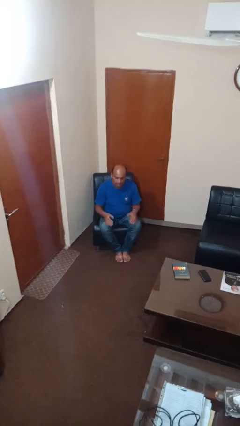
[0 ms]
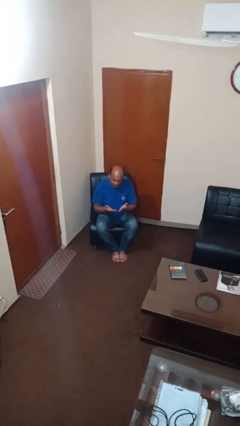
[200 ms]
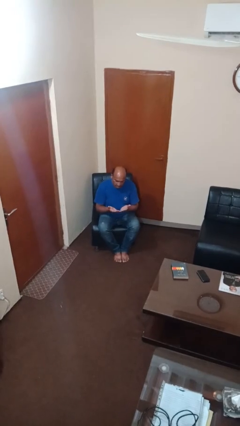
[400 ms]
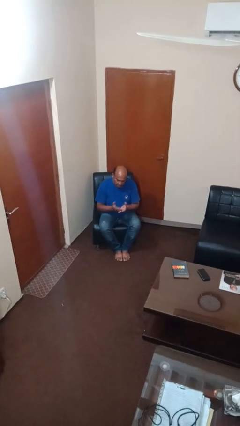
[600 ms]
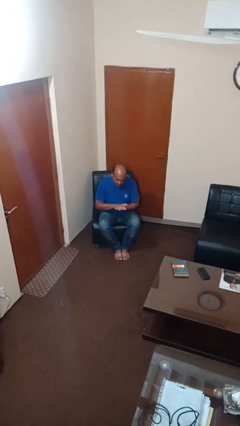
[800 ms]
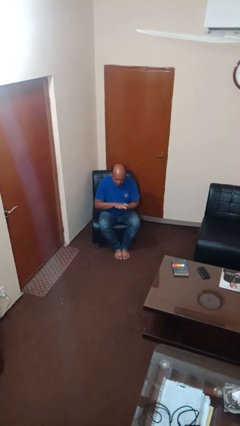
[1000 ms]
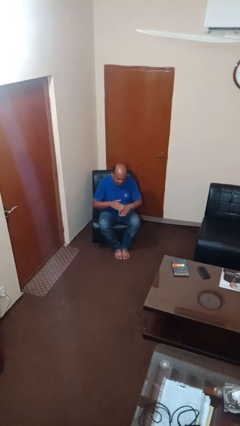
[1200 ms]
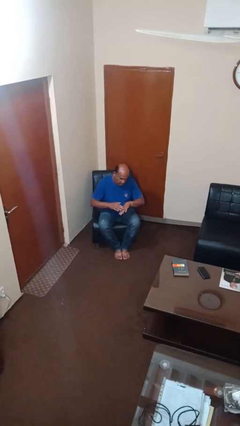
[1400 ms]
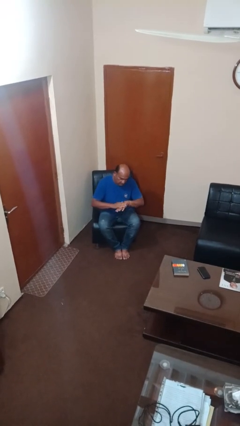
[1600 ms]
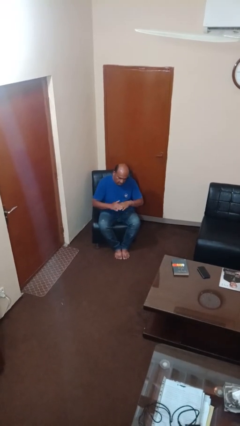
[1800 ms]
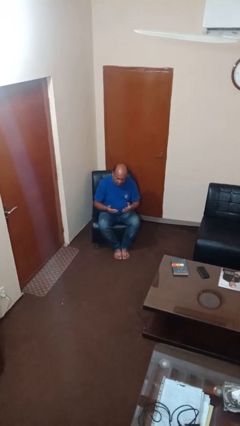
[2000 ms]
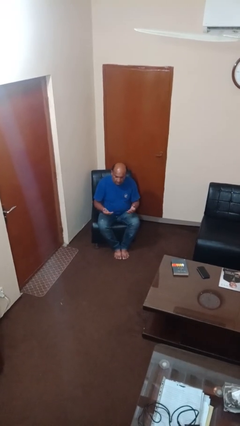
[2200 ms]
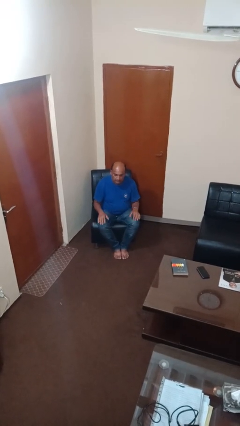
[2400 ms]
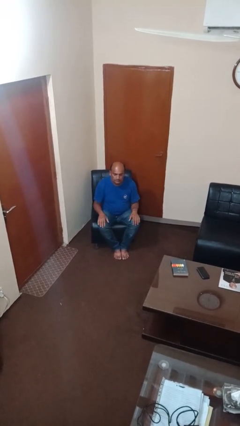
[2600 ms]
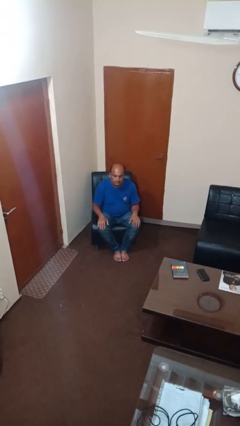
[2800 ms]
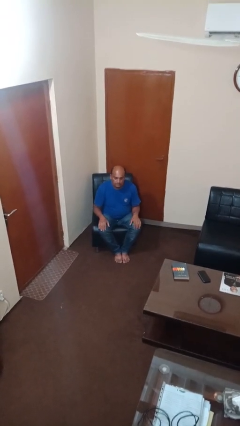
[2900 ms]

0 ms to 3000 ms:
person looks at hands in lap

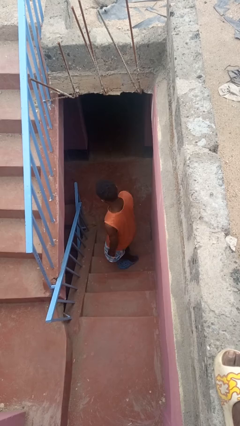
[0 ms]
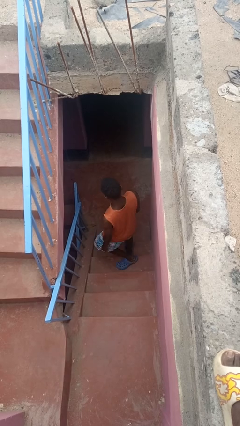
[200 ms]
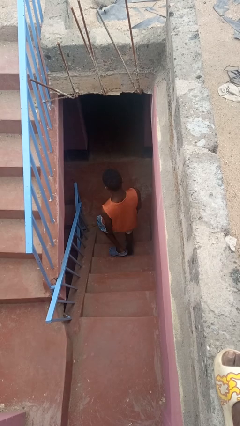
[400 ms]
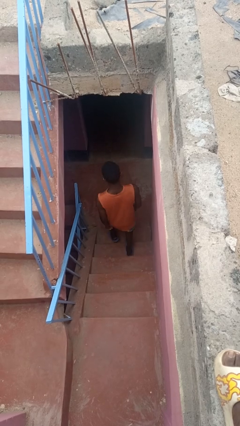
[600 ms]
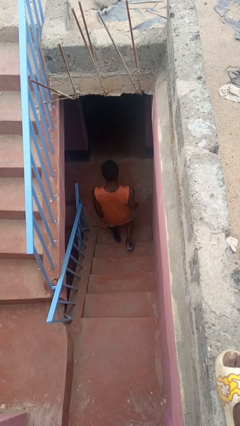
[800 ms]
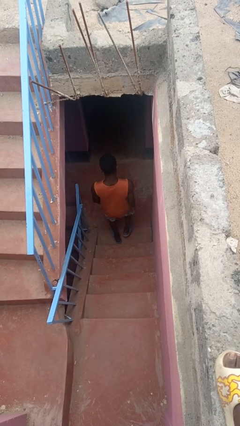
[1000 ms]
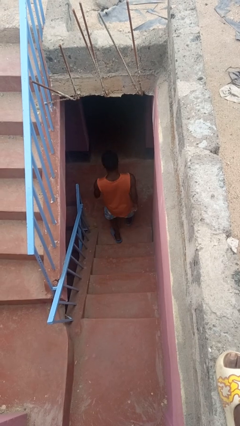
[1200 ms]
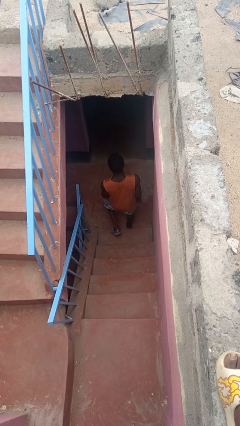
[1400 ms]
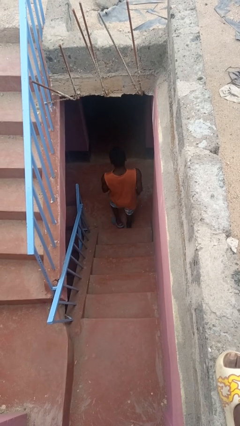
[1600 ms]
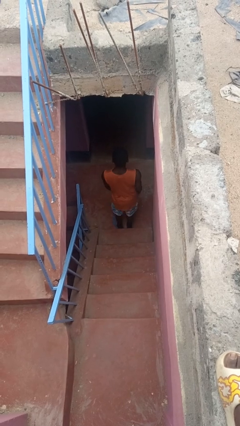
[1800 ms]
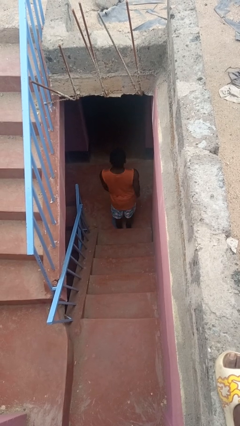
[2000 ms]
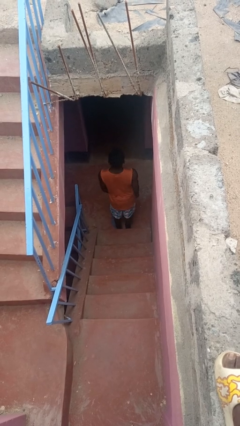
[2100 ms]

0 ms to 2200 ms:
person climbs down stairs

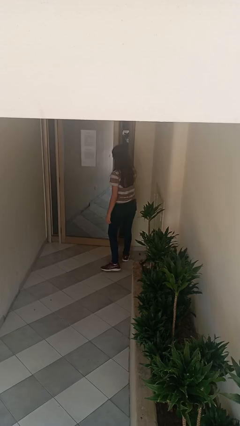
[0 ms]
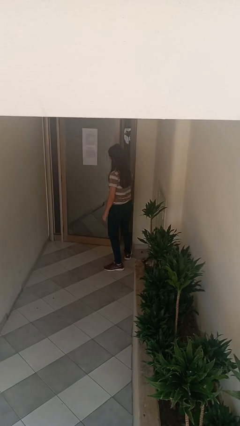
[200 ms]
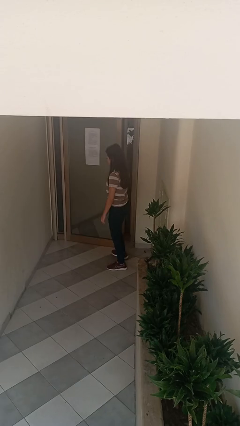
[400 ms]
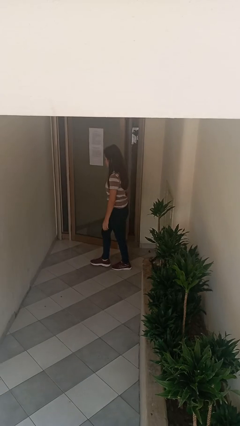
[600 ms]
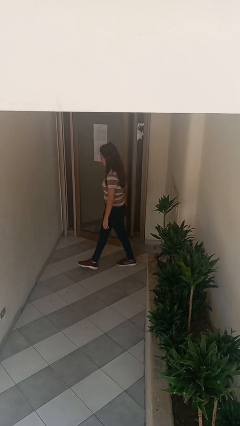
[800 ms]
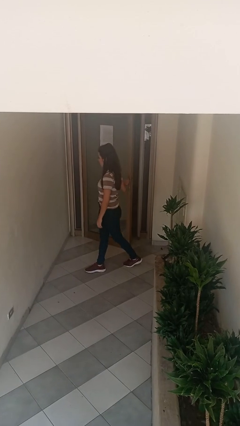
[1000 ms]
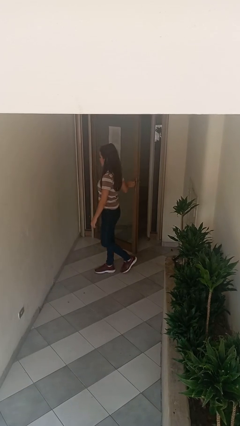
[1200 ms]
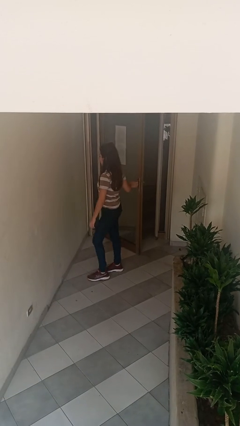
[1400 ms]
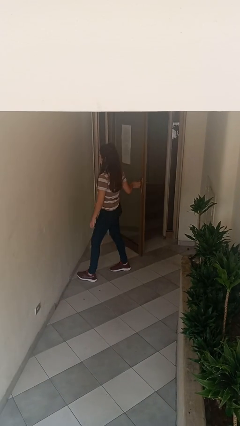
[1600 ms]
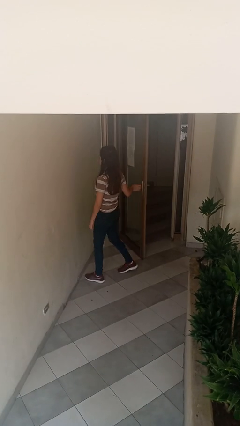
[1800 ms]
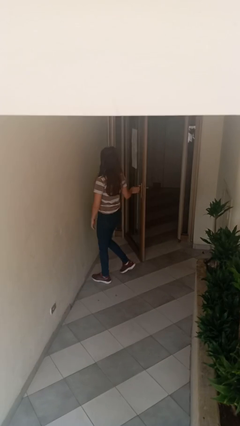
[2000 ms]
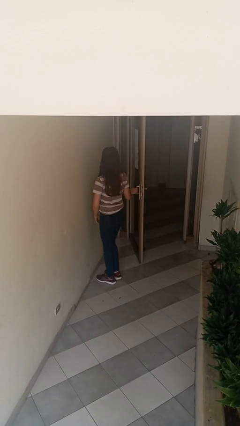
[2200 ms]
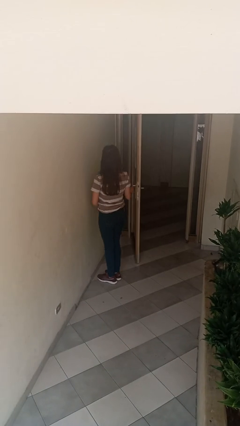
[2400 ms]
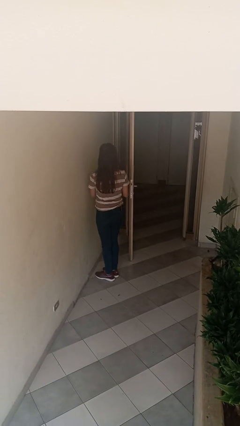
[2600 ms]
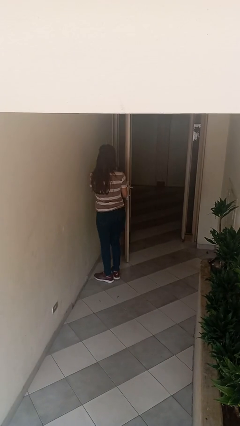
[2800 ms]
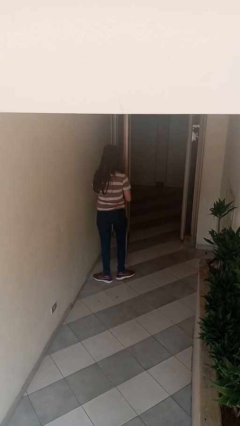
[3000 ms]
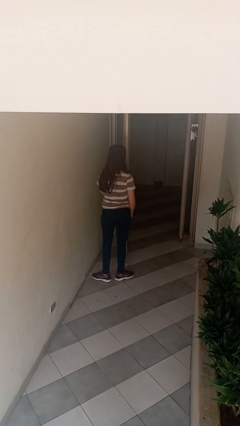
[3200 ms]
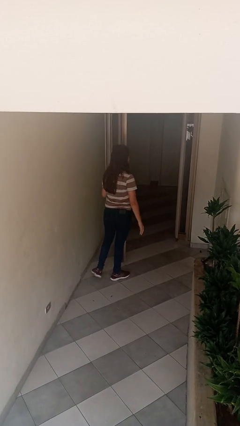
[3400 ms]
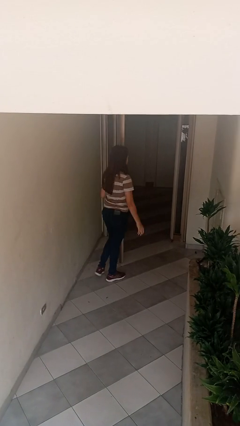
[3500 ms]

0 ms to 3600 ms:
person opens facility door

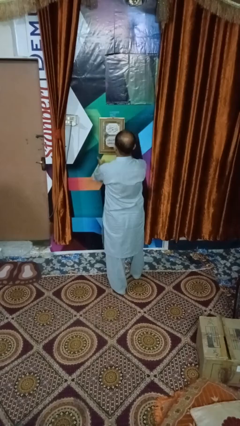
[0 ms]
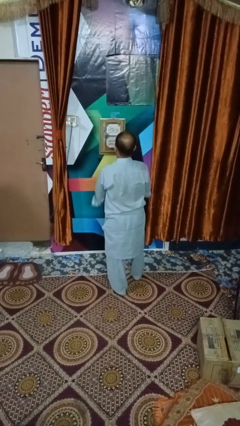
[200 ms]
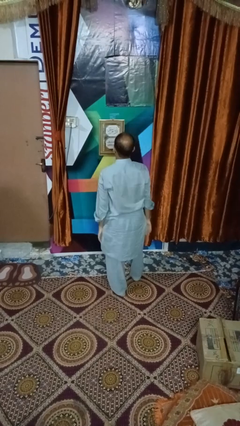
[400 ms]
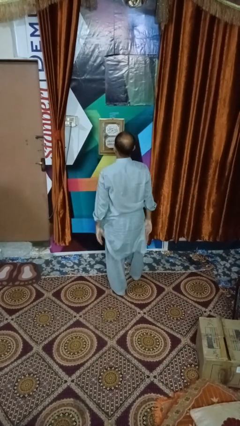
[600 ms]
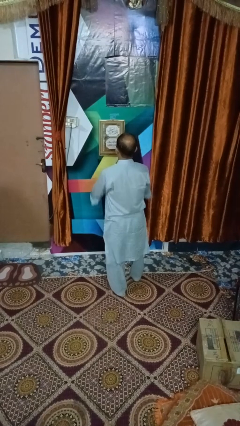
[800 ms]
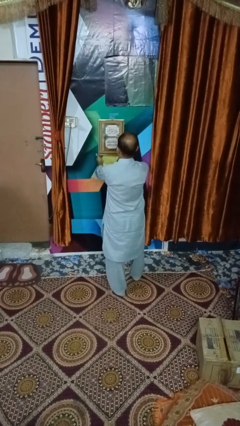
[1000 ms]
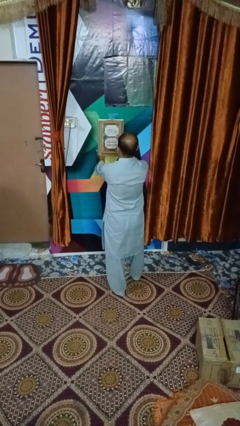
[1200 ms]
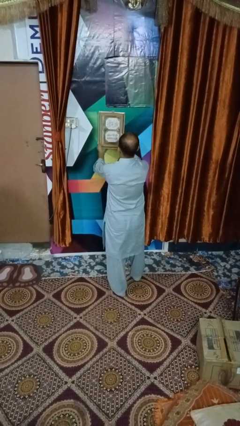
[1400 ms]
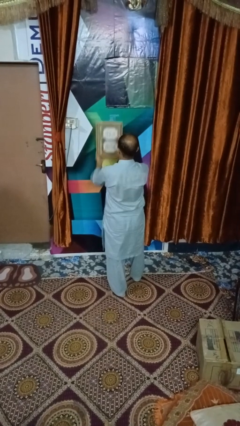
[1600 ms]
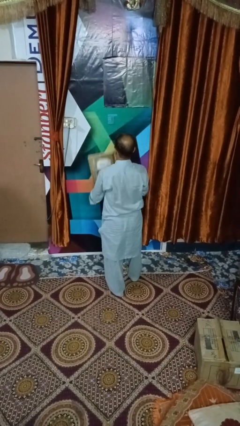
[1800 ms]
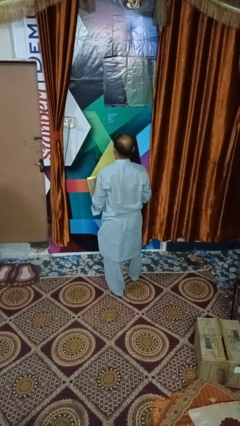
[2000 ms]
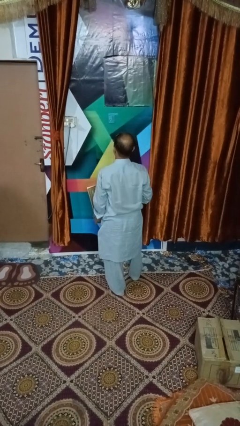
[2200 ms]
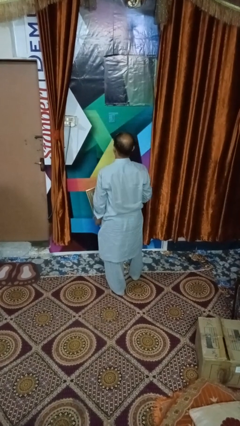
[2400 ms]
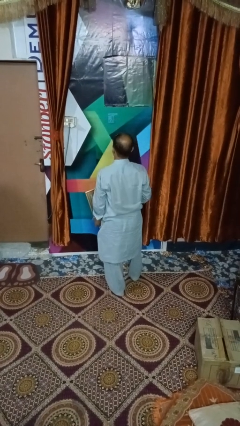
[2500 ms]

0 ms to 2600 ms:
person takes down picture frame

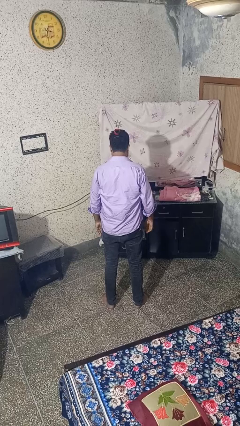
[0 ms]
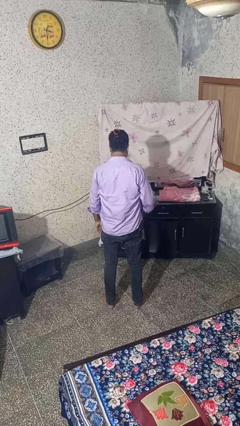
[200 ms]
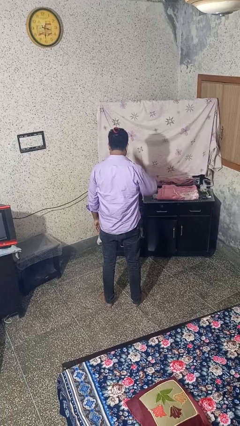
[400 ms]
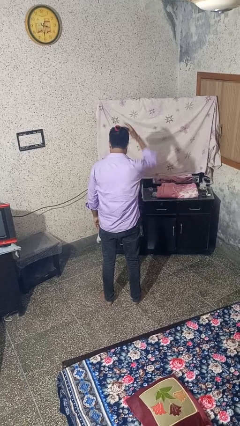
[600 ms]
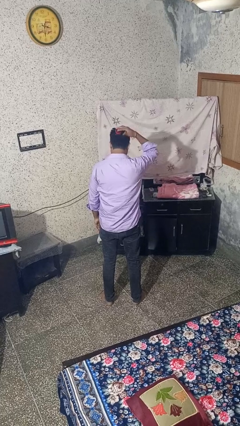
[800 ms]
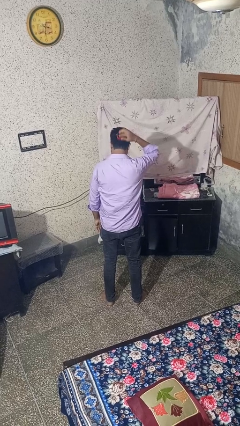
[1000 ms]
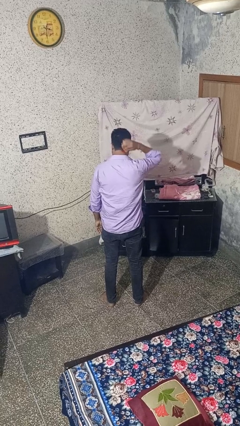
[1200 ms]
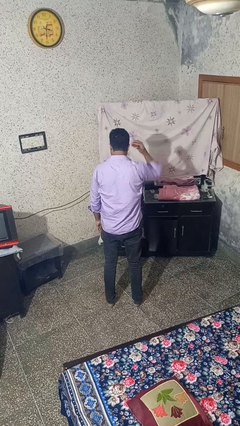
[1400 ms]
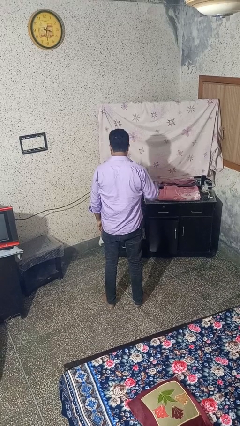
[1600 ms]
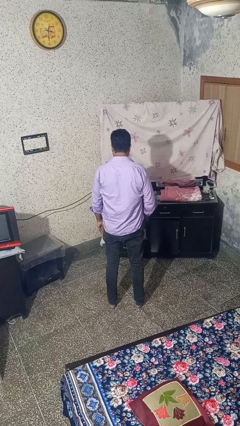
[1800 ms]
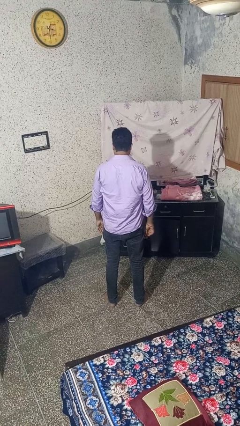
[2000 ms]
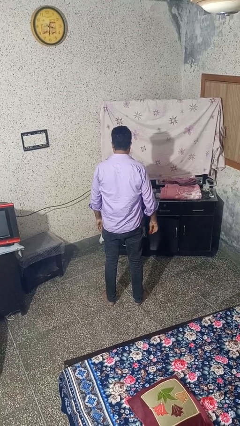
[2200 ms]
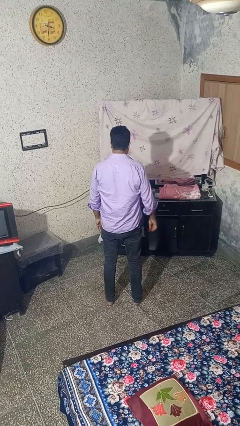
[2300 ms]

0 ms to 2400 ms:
person takes off hairtie

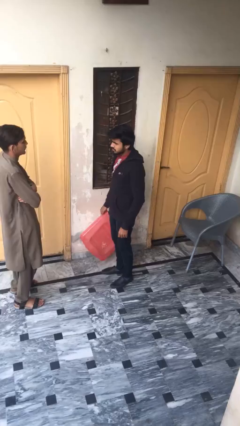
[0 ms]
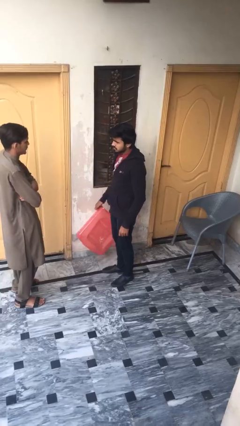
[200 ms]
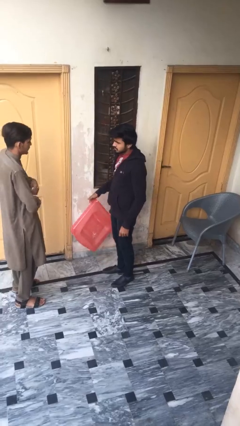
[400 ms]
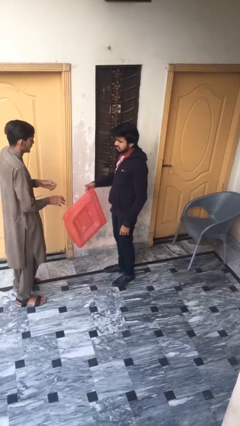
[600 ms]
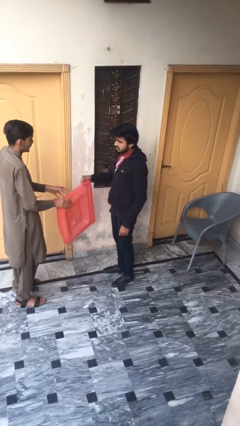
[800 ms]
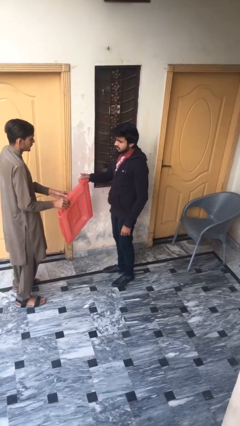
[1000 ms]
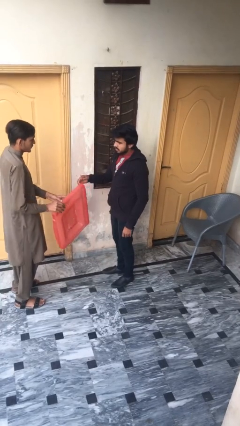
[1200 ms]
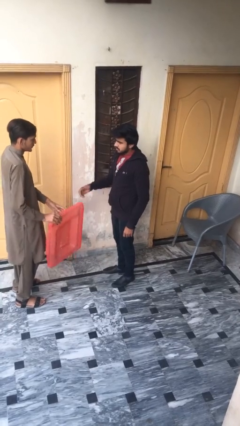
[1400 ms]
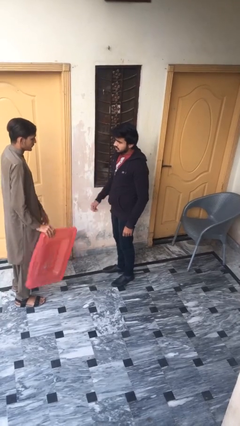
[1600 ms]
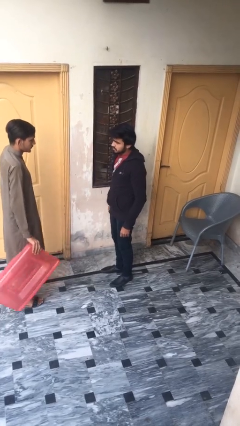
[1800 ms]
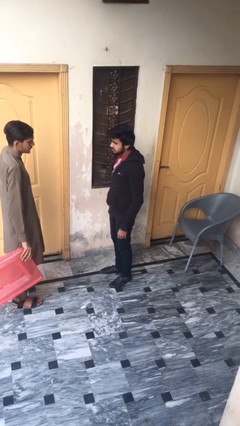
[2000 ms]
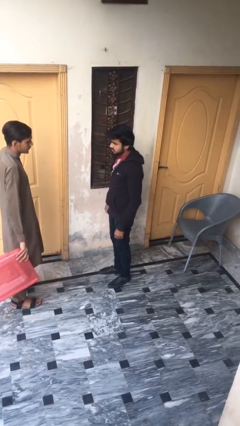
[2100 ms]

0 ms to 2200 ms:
person transfers object to person

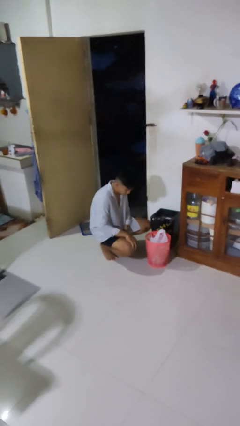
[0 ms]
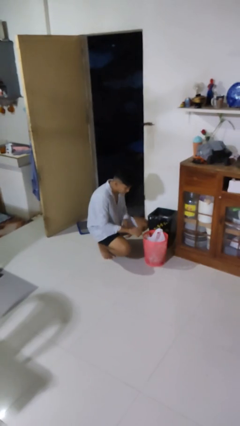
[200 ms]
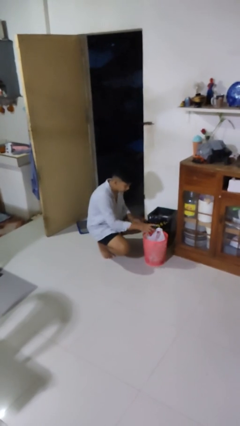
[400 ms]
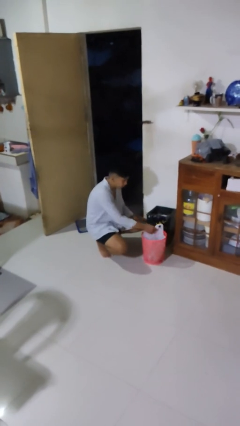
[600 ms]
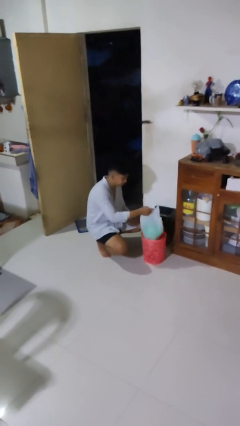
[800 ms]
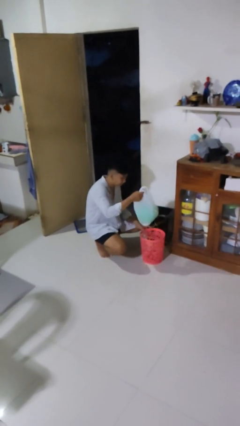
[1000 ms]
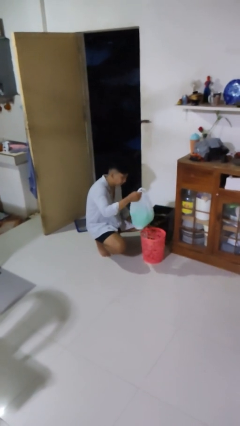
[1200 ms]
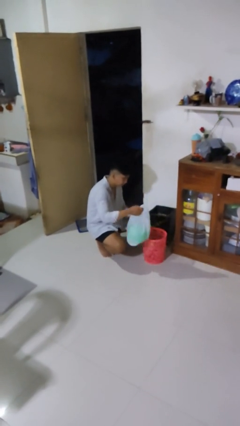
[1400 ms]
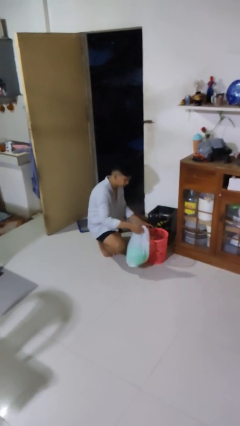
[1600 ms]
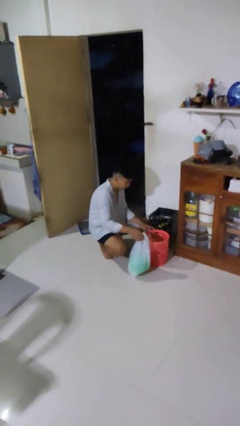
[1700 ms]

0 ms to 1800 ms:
person removes trashbag from trashcan
